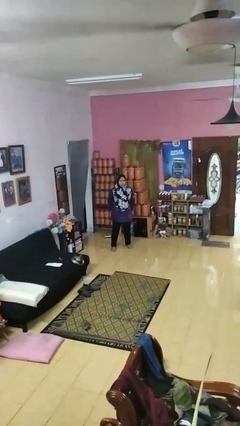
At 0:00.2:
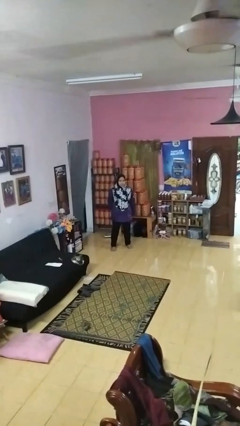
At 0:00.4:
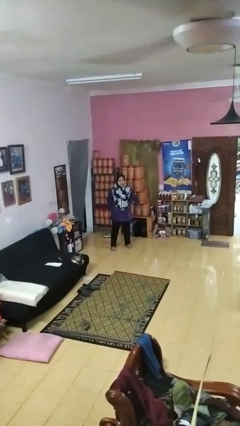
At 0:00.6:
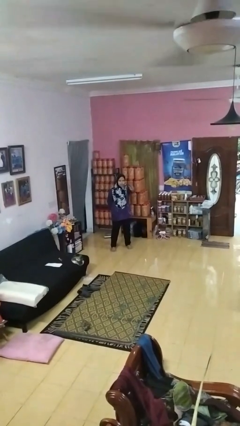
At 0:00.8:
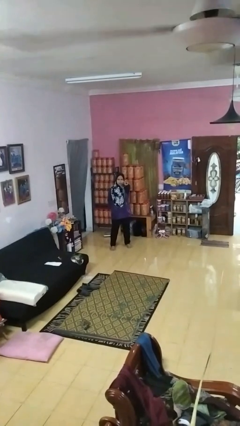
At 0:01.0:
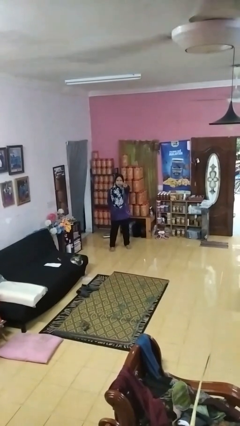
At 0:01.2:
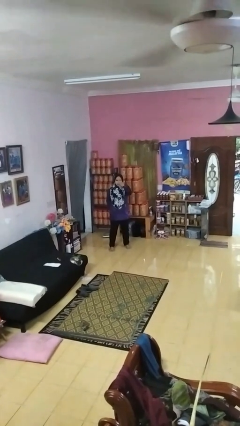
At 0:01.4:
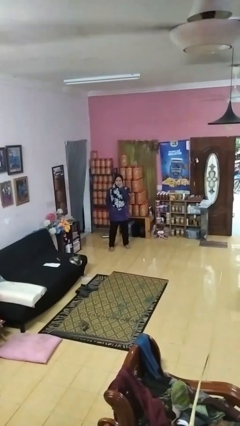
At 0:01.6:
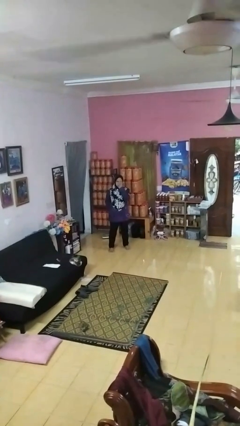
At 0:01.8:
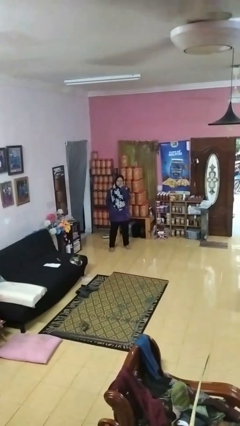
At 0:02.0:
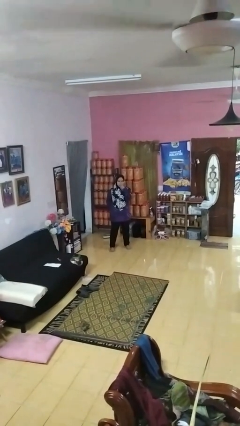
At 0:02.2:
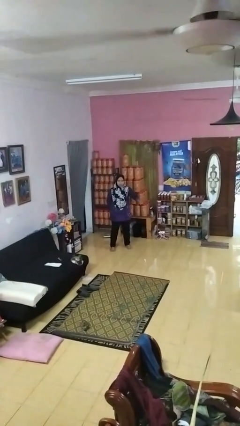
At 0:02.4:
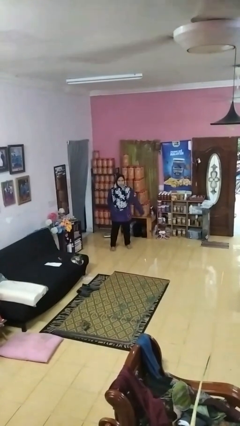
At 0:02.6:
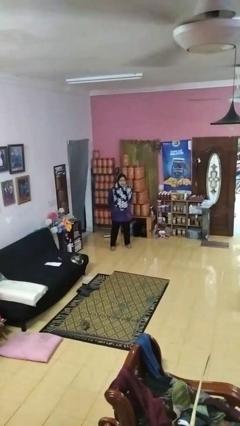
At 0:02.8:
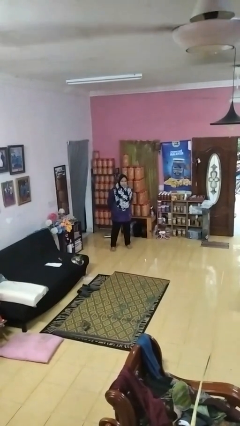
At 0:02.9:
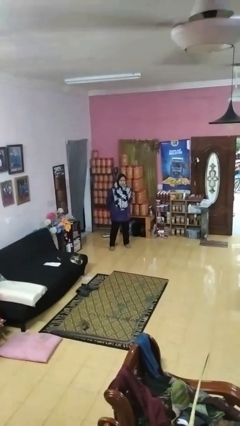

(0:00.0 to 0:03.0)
person gestures watch closely

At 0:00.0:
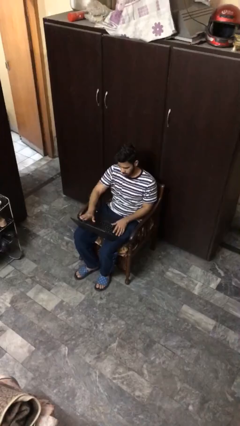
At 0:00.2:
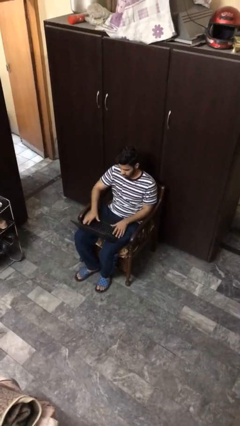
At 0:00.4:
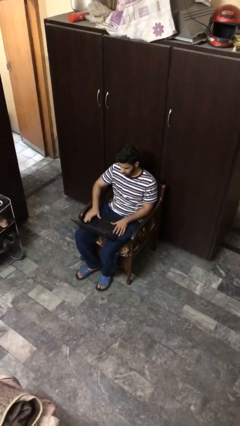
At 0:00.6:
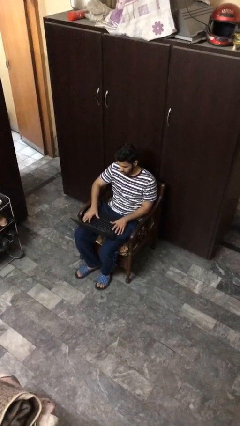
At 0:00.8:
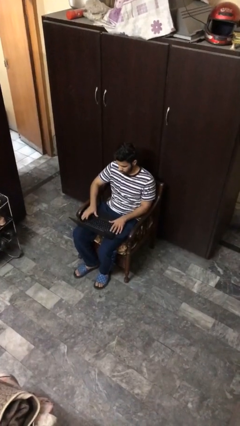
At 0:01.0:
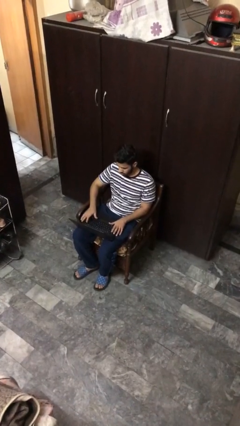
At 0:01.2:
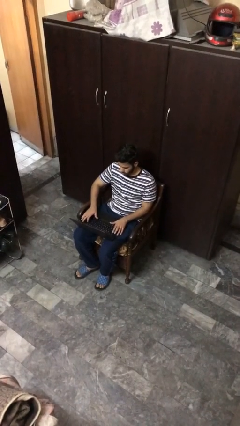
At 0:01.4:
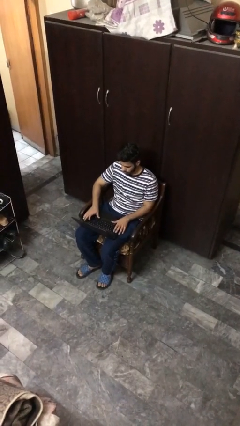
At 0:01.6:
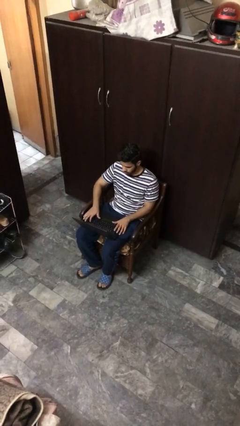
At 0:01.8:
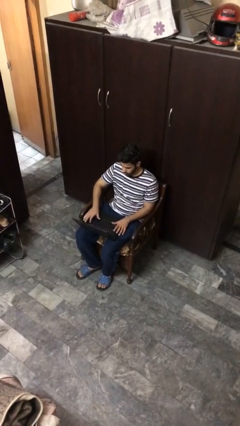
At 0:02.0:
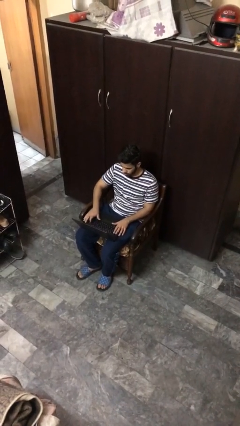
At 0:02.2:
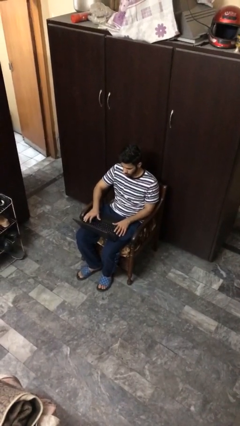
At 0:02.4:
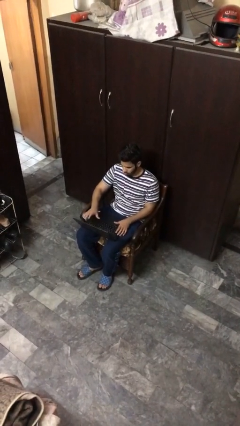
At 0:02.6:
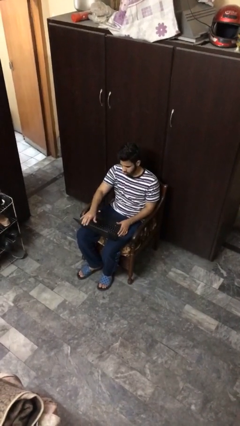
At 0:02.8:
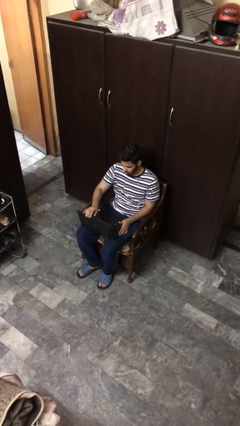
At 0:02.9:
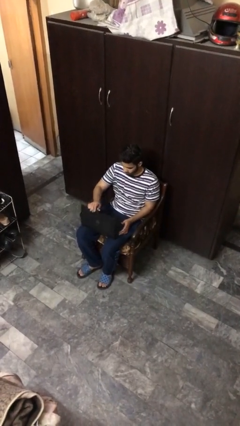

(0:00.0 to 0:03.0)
person interacts with laptop

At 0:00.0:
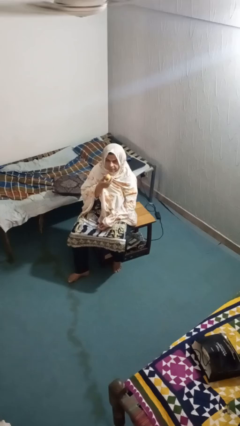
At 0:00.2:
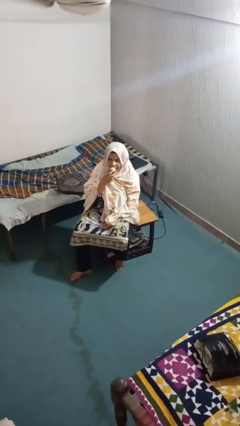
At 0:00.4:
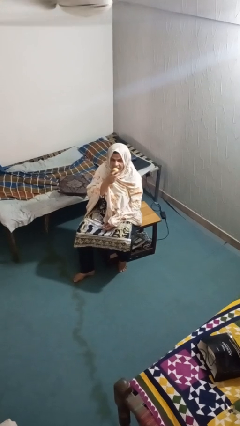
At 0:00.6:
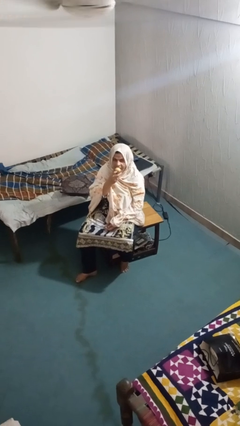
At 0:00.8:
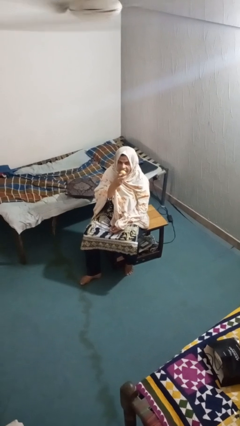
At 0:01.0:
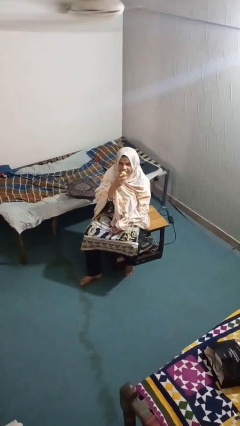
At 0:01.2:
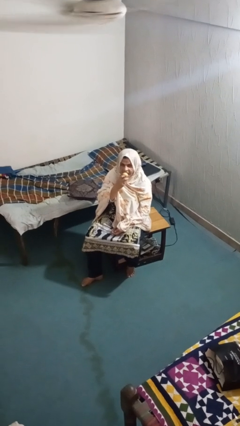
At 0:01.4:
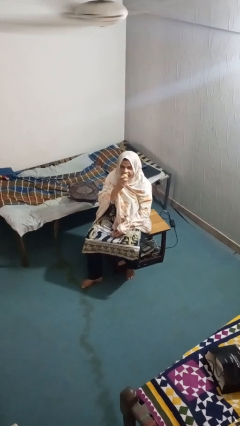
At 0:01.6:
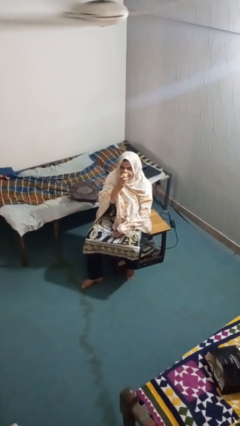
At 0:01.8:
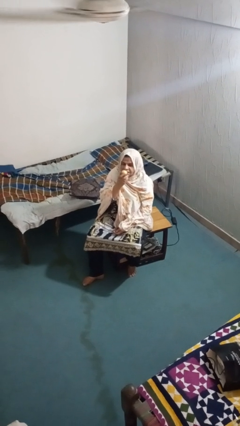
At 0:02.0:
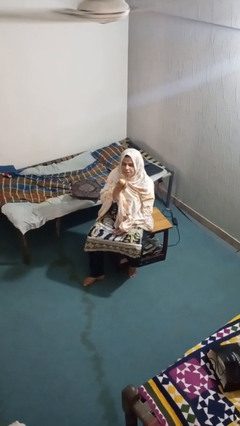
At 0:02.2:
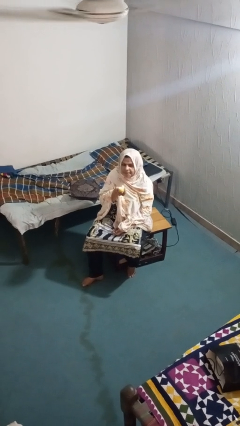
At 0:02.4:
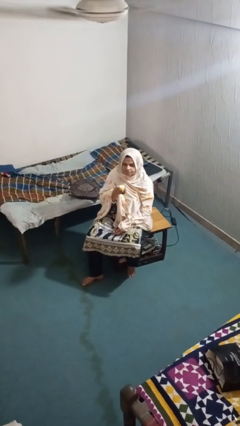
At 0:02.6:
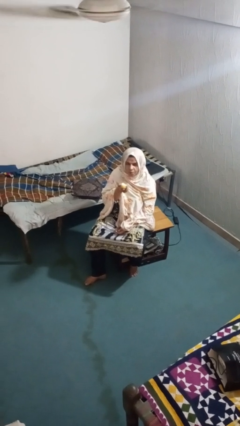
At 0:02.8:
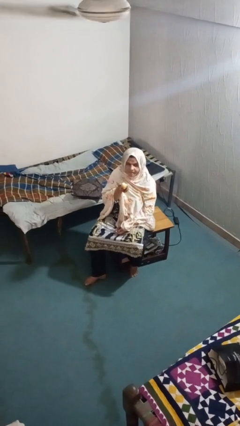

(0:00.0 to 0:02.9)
person eats apple

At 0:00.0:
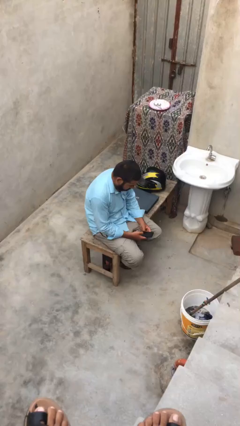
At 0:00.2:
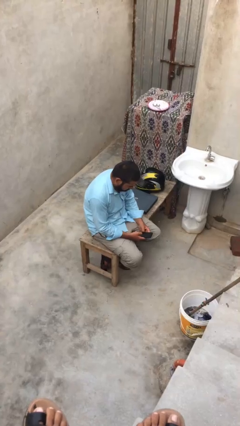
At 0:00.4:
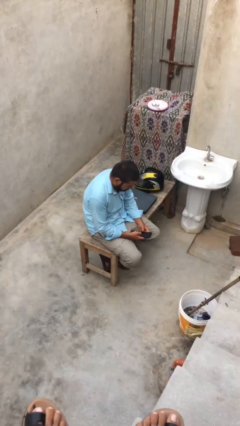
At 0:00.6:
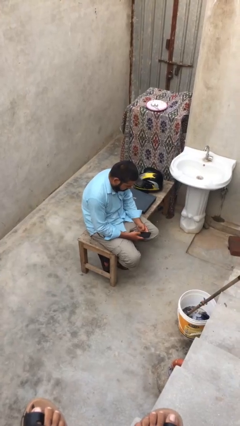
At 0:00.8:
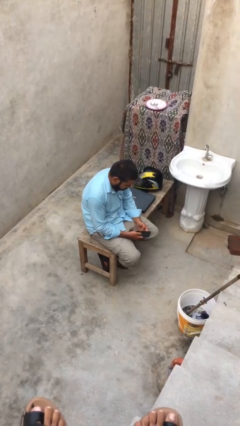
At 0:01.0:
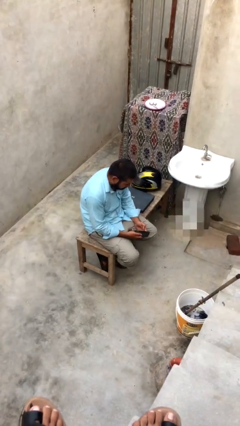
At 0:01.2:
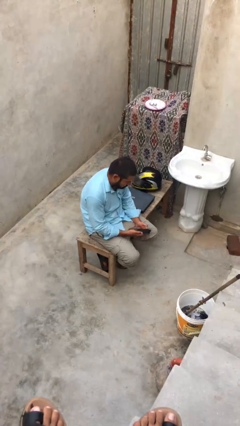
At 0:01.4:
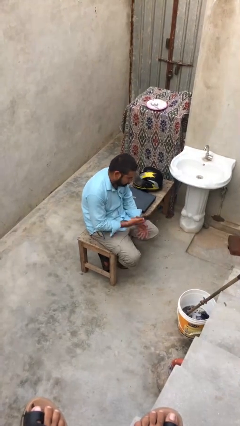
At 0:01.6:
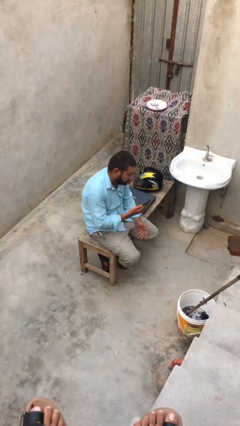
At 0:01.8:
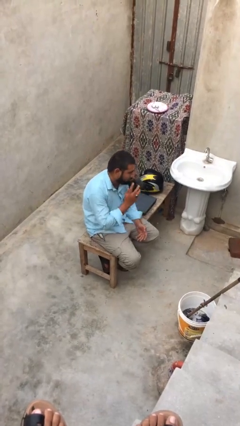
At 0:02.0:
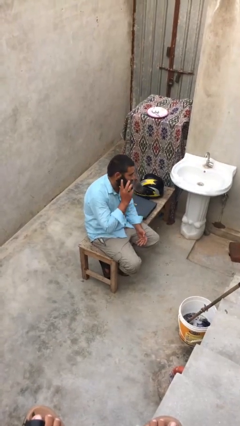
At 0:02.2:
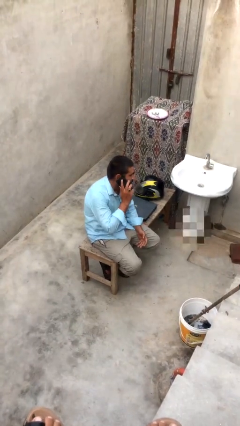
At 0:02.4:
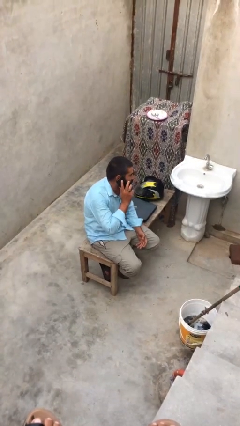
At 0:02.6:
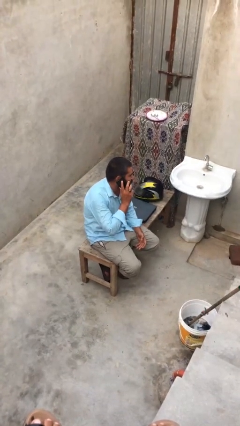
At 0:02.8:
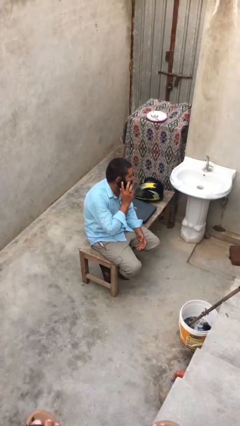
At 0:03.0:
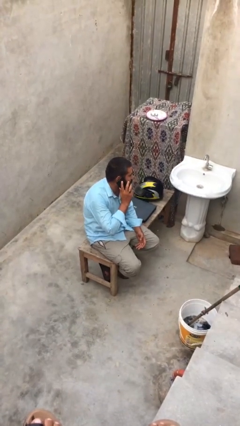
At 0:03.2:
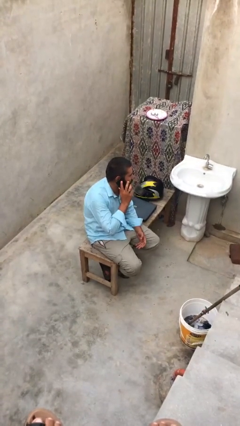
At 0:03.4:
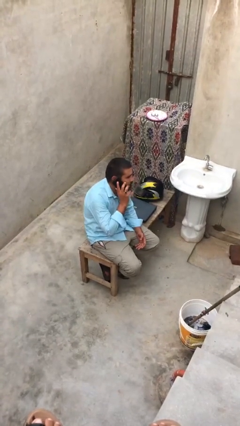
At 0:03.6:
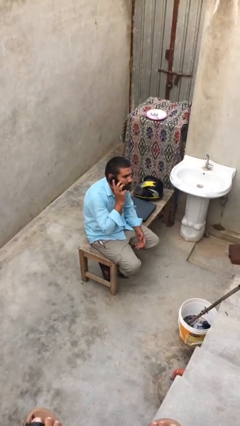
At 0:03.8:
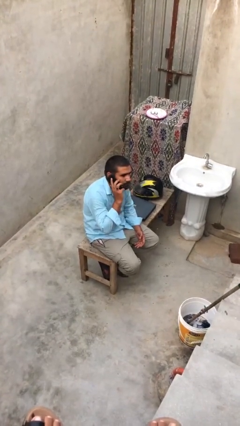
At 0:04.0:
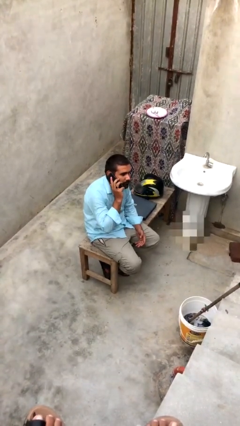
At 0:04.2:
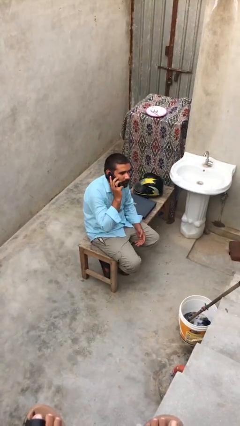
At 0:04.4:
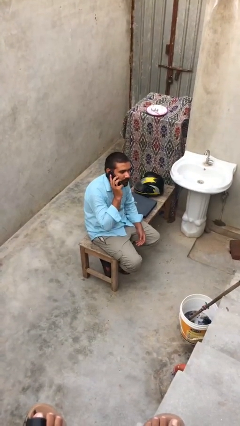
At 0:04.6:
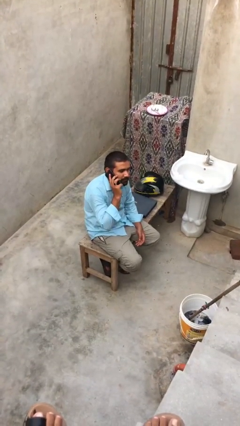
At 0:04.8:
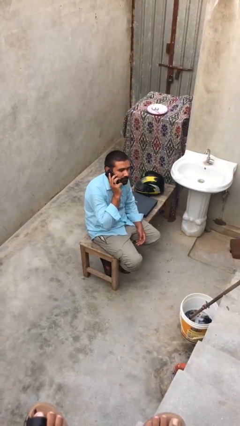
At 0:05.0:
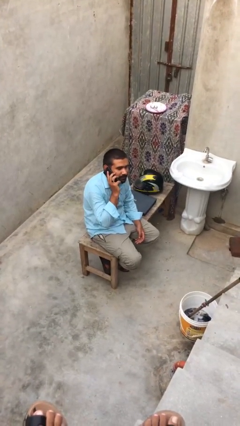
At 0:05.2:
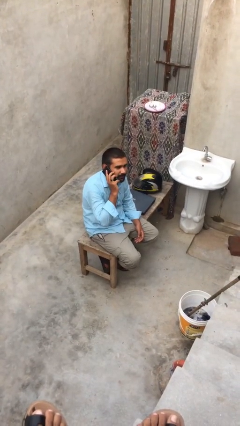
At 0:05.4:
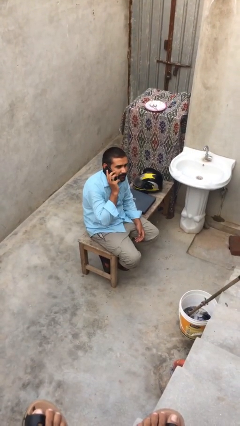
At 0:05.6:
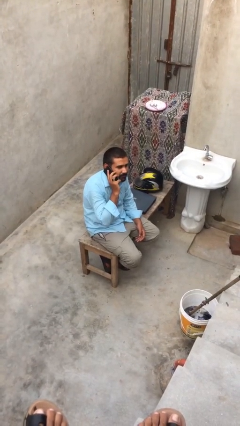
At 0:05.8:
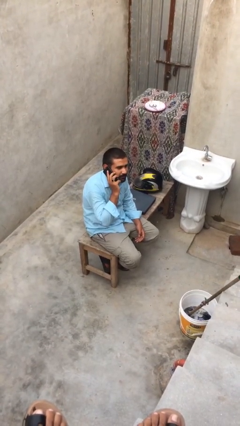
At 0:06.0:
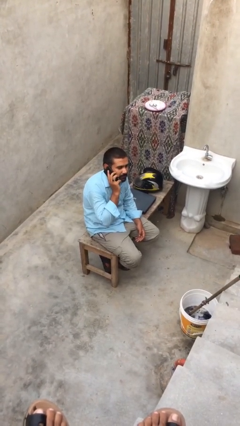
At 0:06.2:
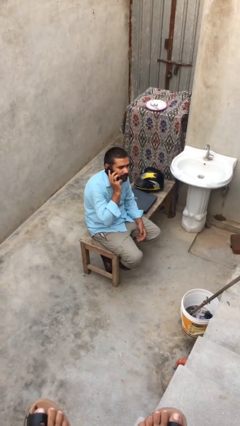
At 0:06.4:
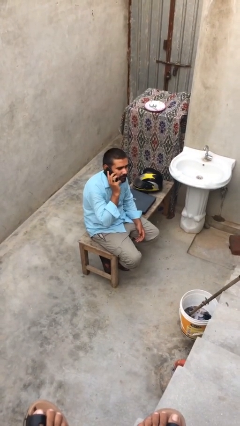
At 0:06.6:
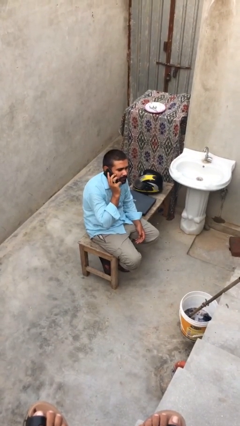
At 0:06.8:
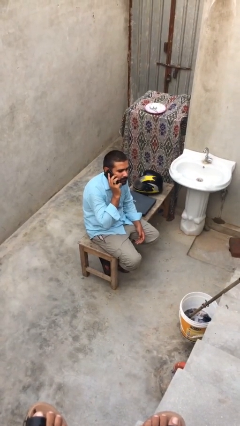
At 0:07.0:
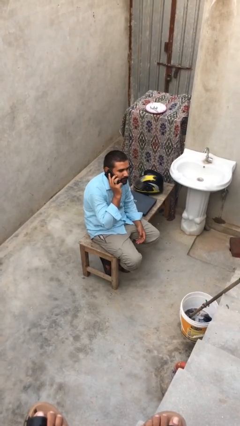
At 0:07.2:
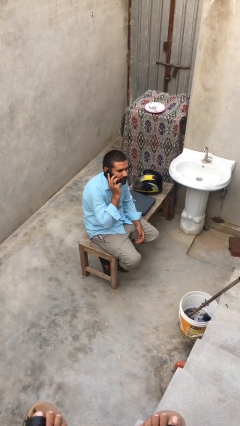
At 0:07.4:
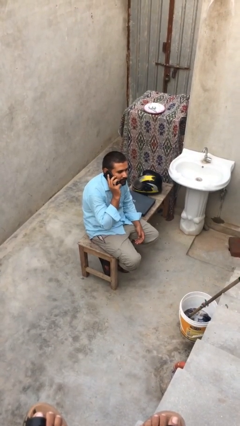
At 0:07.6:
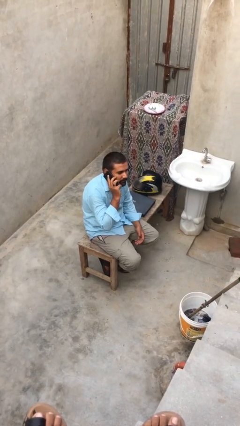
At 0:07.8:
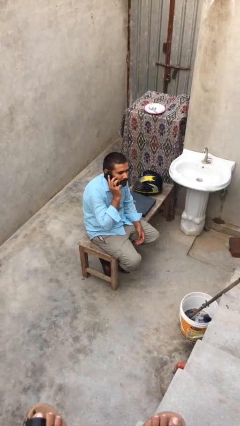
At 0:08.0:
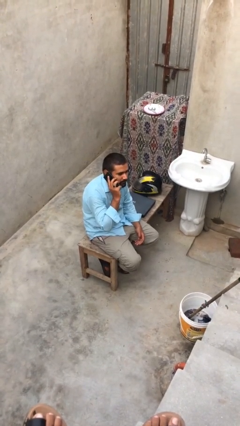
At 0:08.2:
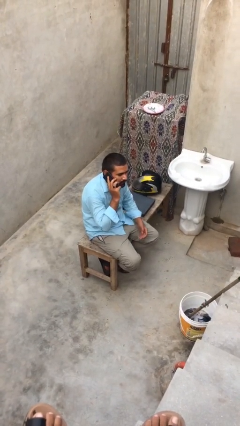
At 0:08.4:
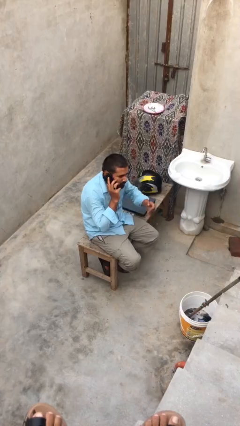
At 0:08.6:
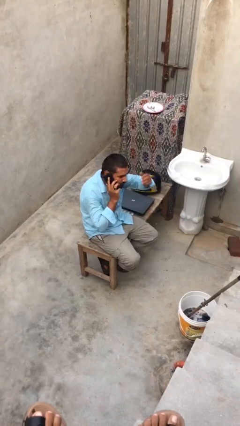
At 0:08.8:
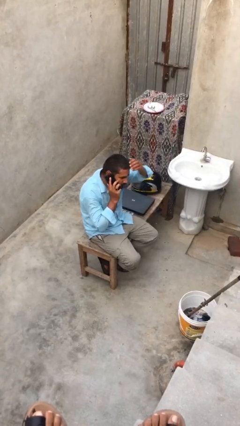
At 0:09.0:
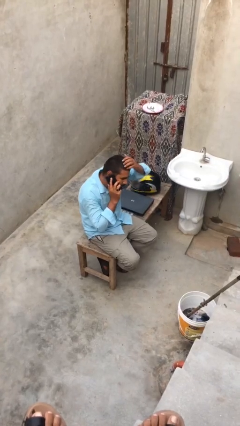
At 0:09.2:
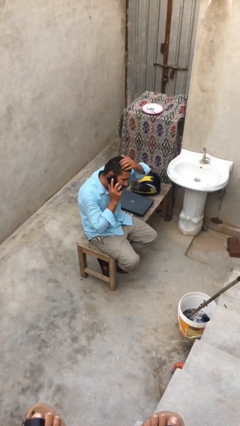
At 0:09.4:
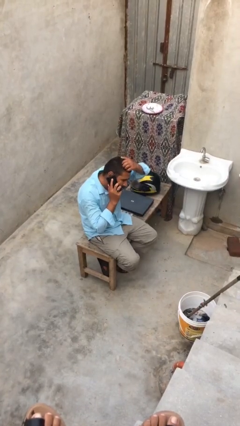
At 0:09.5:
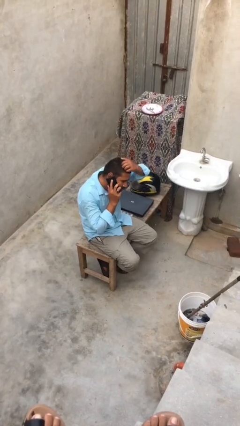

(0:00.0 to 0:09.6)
person talks on phone
